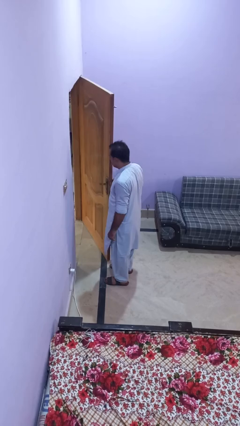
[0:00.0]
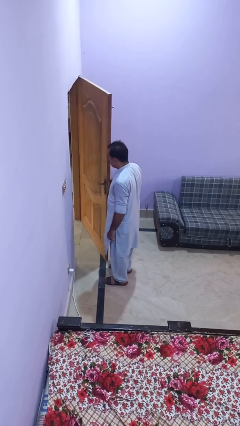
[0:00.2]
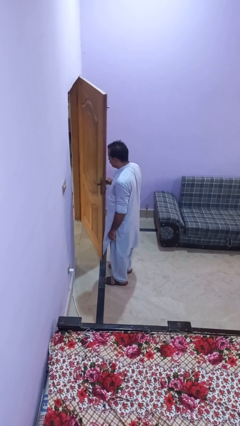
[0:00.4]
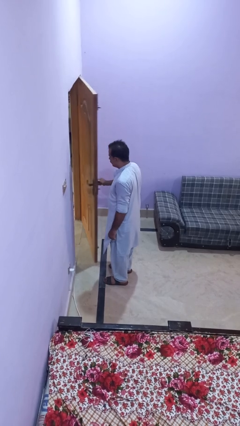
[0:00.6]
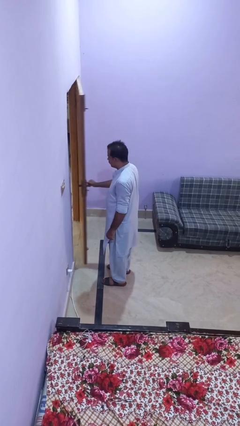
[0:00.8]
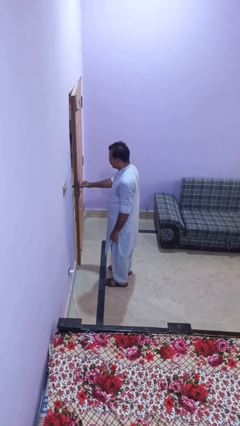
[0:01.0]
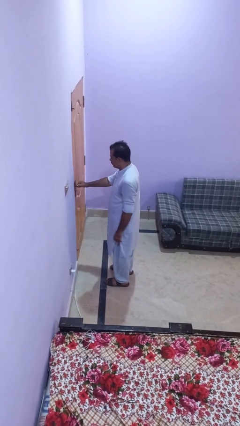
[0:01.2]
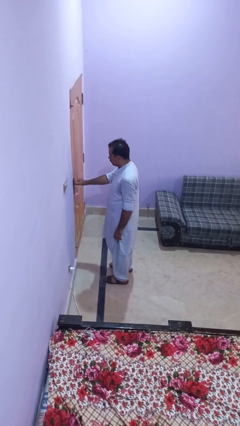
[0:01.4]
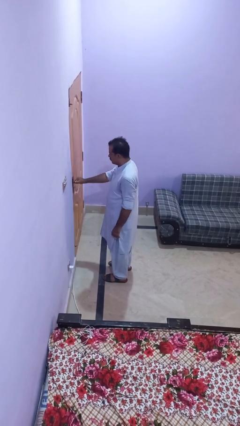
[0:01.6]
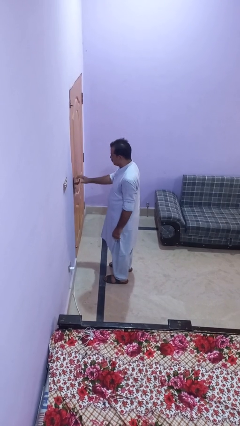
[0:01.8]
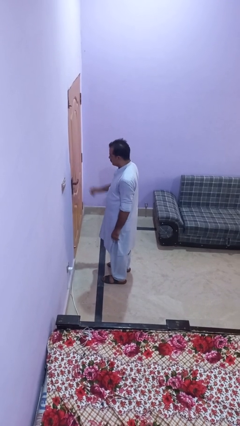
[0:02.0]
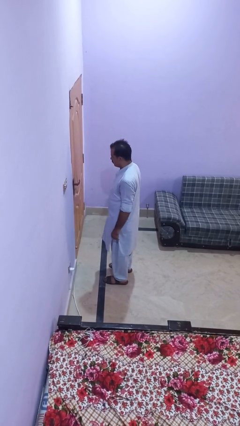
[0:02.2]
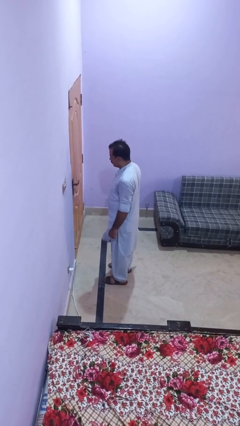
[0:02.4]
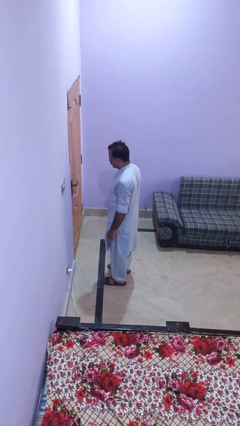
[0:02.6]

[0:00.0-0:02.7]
person closes facility door

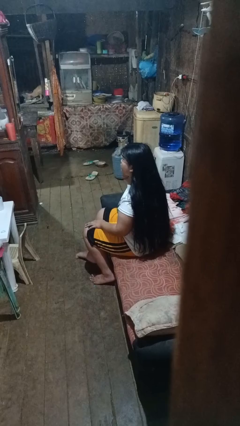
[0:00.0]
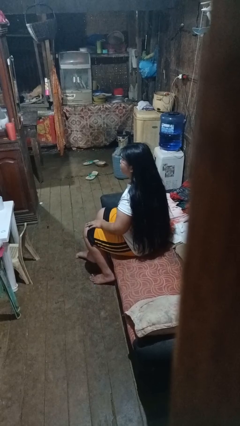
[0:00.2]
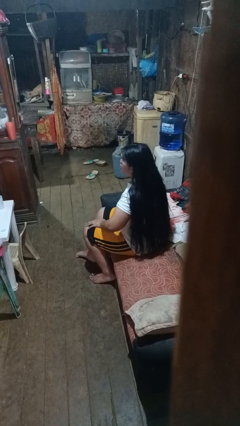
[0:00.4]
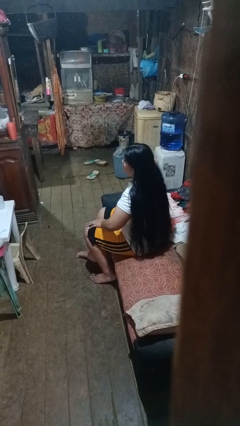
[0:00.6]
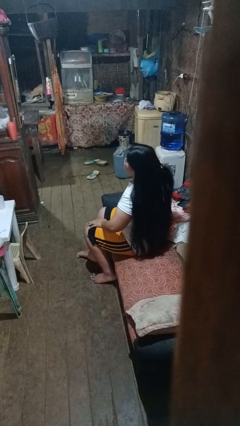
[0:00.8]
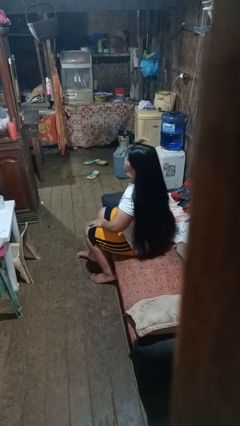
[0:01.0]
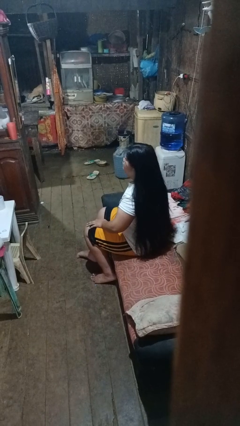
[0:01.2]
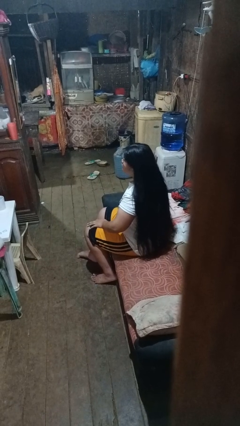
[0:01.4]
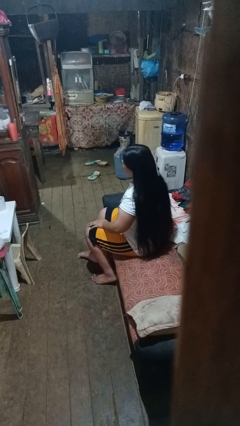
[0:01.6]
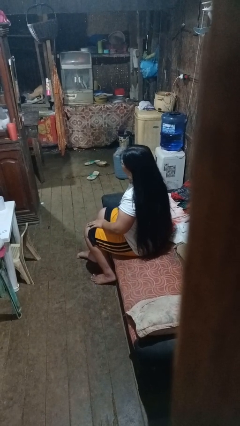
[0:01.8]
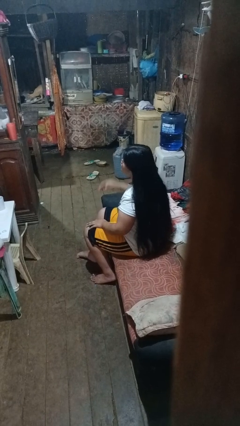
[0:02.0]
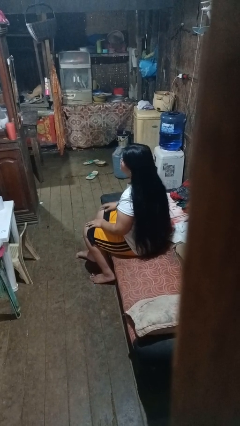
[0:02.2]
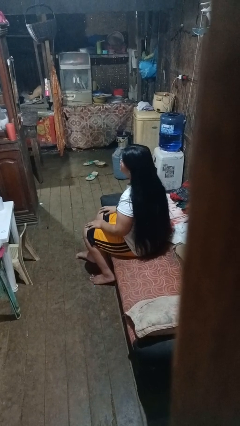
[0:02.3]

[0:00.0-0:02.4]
person strokes hair

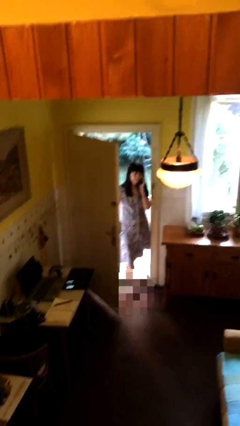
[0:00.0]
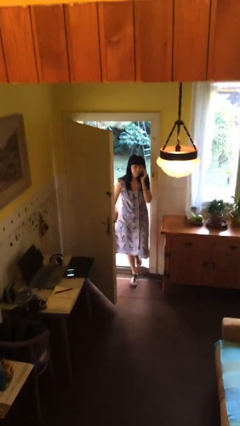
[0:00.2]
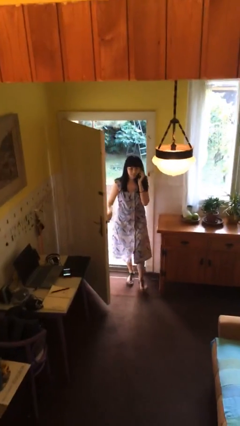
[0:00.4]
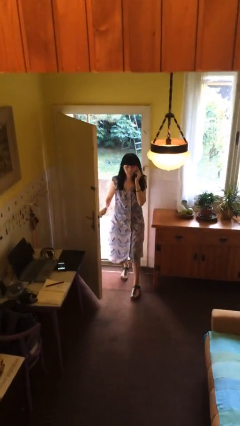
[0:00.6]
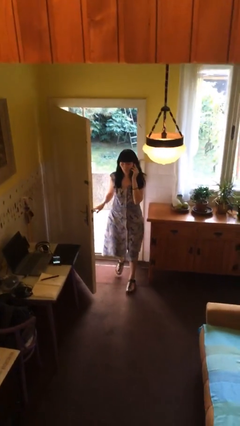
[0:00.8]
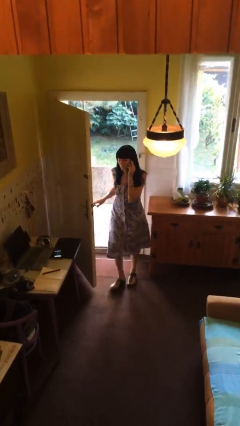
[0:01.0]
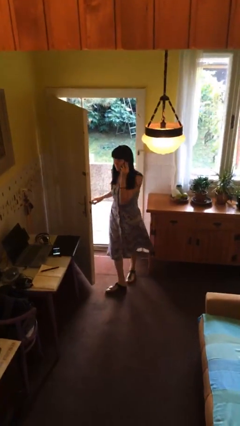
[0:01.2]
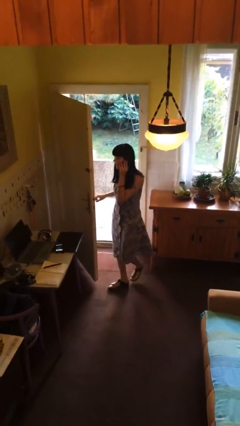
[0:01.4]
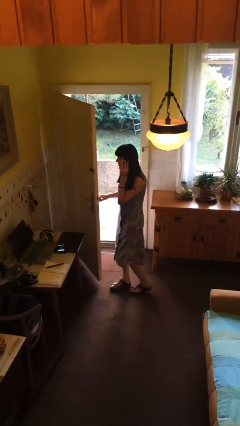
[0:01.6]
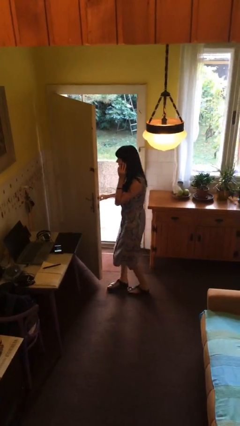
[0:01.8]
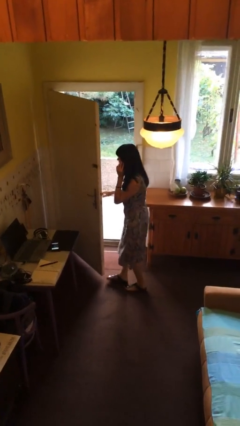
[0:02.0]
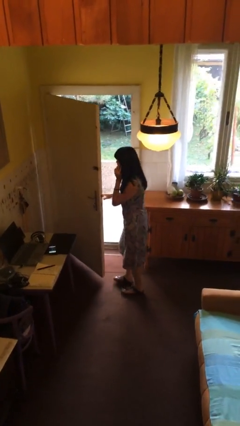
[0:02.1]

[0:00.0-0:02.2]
person enters scene through structure

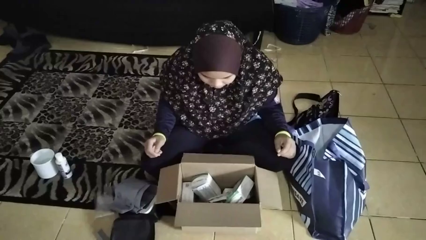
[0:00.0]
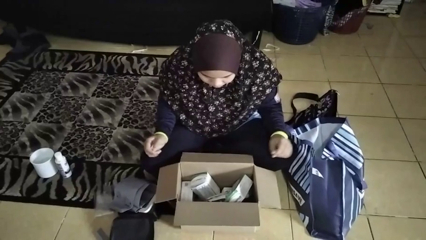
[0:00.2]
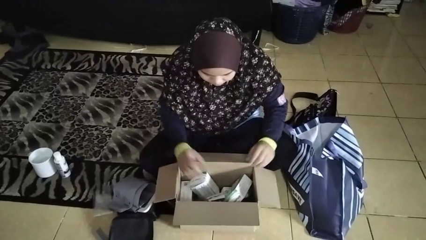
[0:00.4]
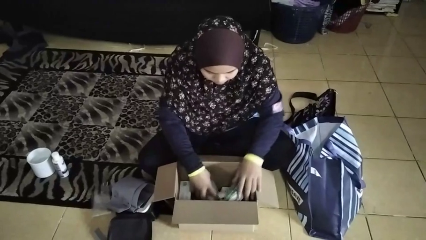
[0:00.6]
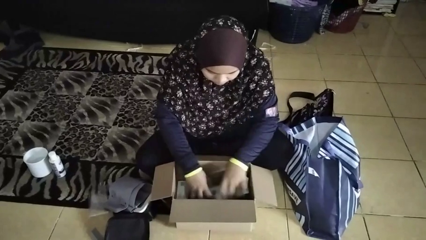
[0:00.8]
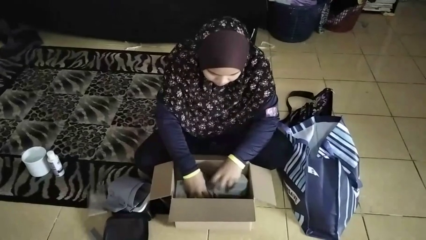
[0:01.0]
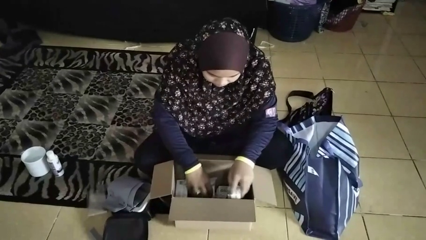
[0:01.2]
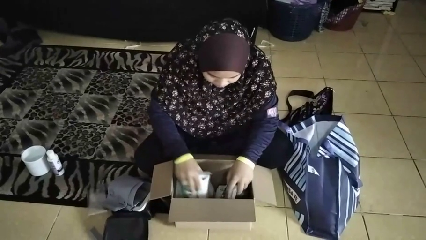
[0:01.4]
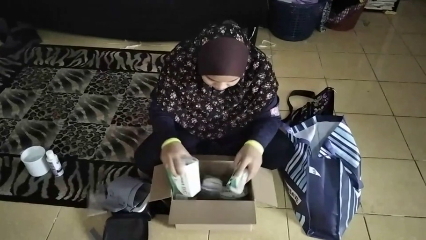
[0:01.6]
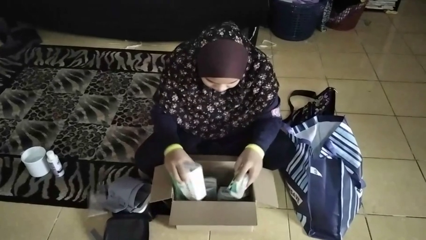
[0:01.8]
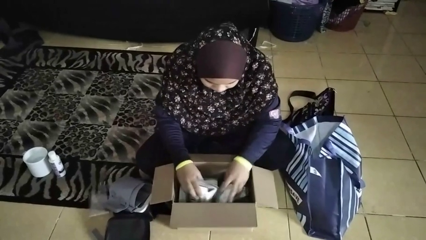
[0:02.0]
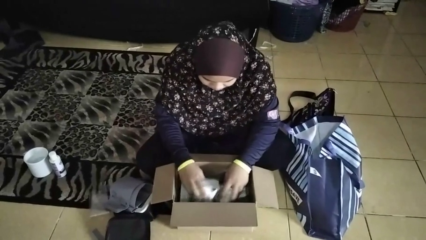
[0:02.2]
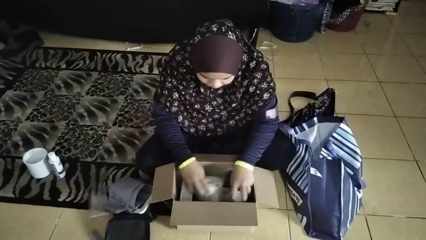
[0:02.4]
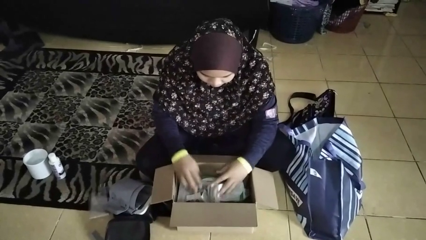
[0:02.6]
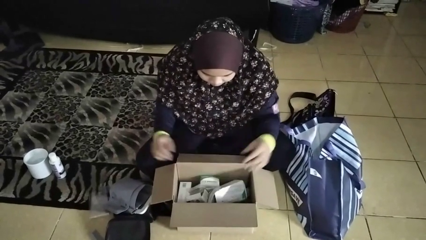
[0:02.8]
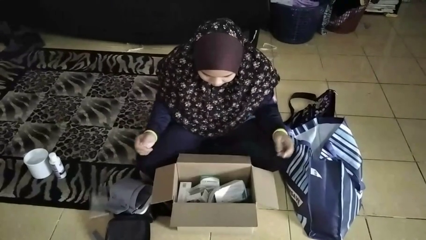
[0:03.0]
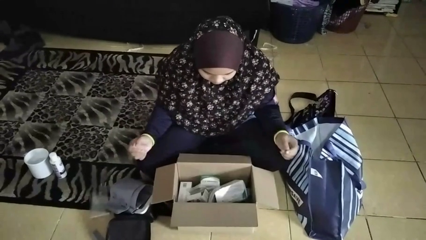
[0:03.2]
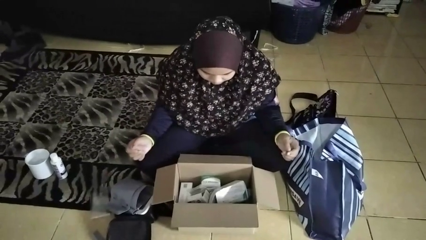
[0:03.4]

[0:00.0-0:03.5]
person searches in box

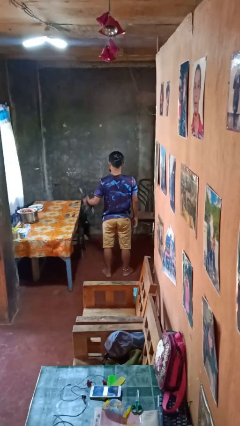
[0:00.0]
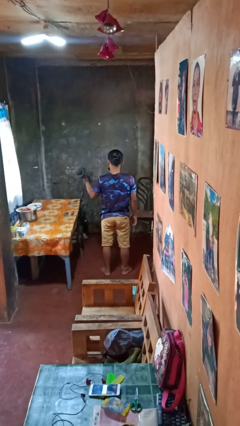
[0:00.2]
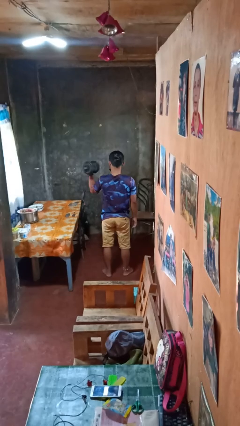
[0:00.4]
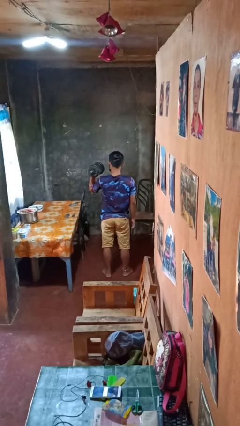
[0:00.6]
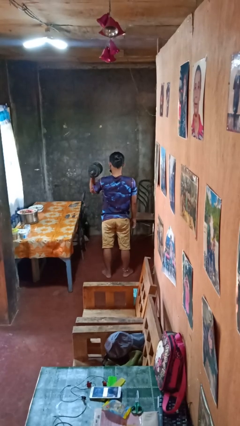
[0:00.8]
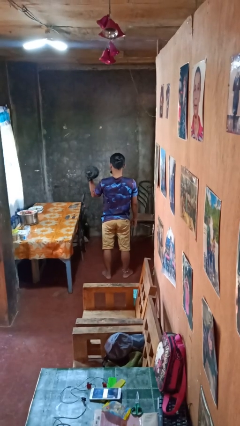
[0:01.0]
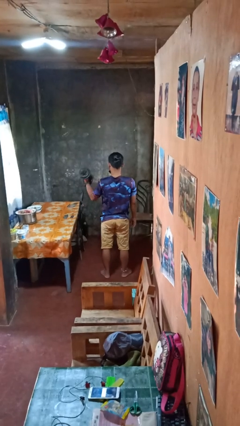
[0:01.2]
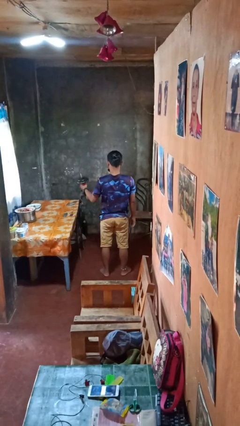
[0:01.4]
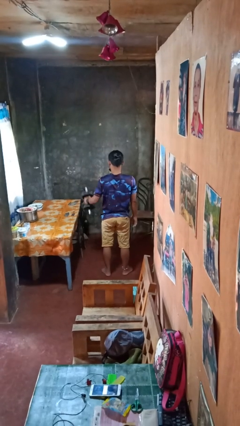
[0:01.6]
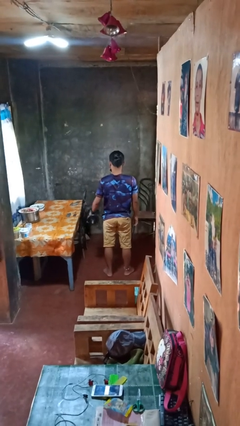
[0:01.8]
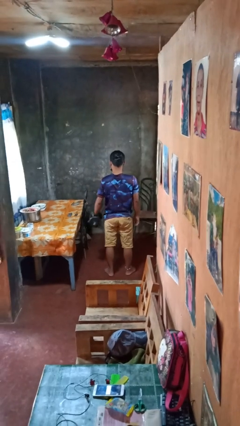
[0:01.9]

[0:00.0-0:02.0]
person lifts dumbbells

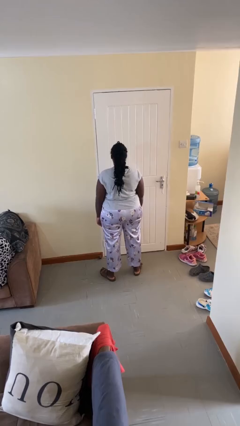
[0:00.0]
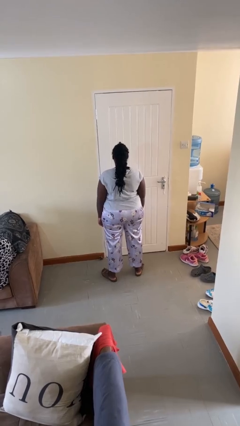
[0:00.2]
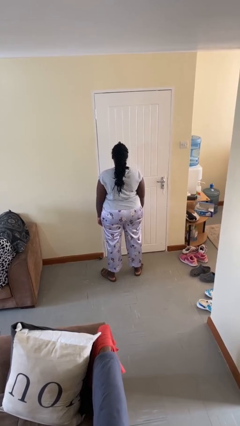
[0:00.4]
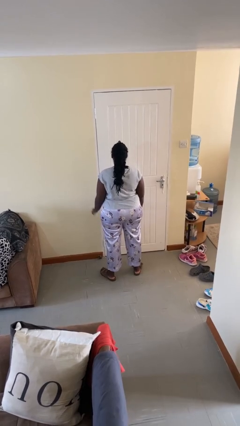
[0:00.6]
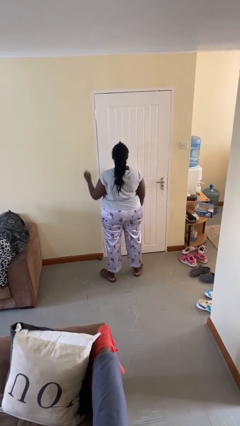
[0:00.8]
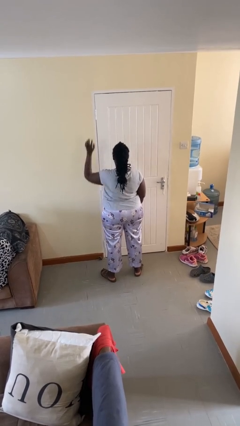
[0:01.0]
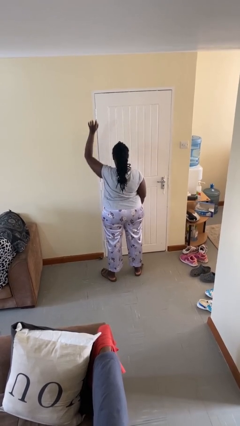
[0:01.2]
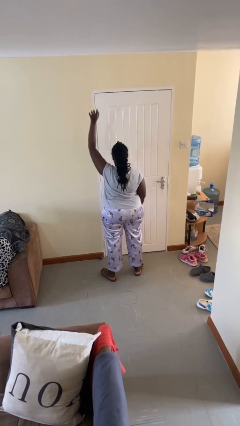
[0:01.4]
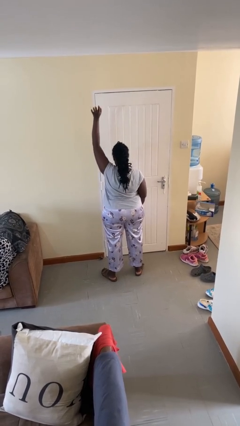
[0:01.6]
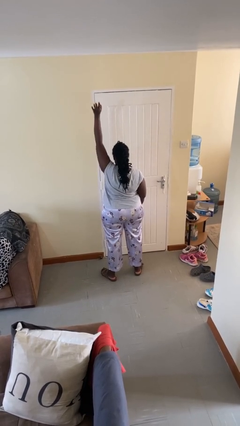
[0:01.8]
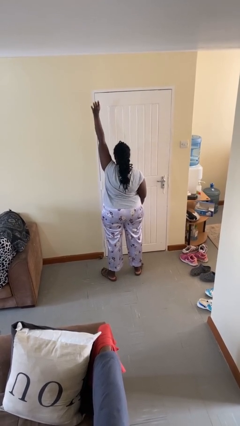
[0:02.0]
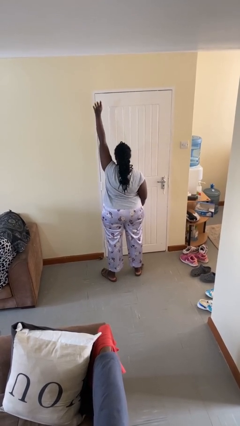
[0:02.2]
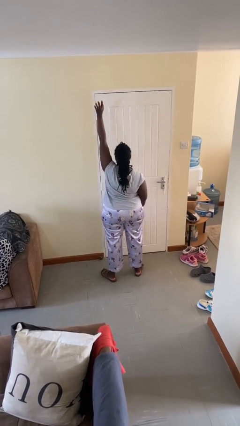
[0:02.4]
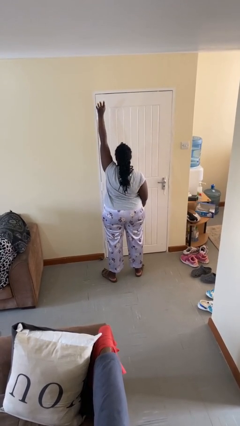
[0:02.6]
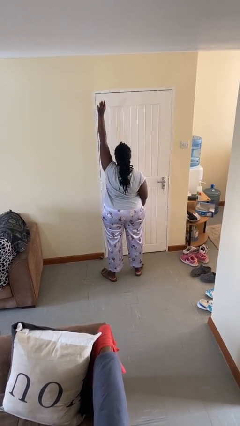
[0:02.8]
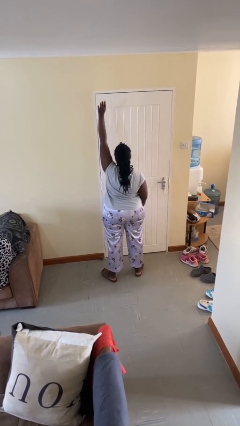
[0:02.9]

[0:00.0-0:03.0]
person gestures raise hand

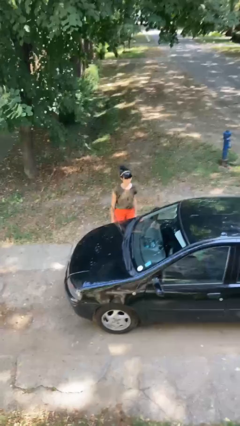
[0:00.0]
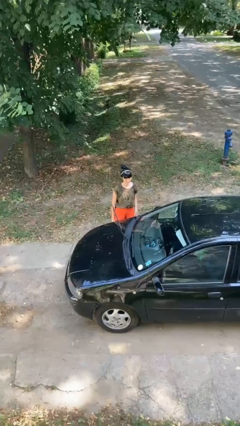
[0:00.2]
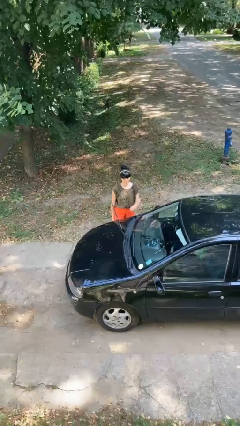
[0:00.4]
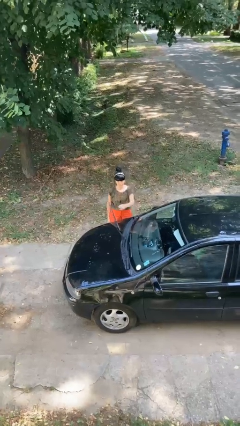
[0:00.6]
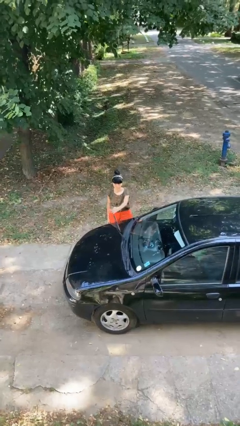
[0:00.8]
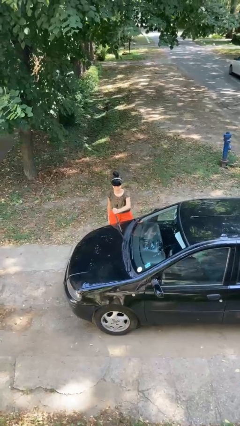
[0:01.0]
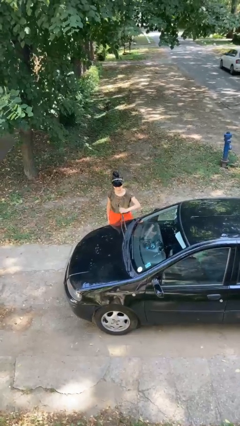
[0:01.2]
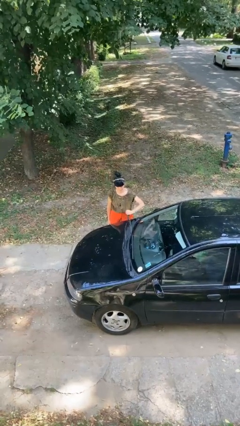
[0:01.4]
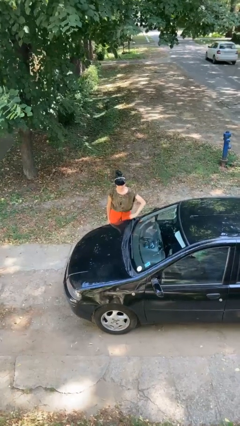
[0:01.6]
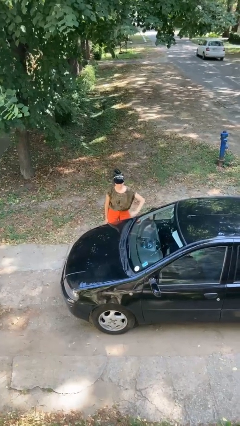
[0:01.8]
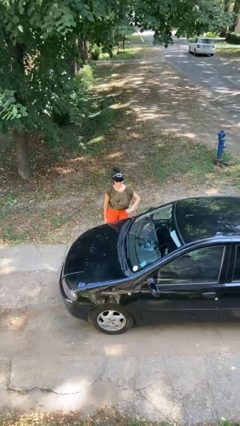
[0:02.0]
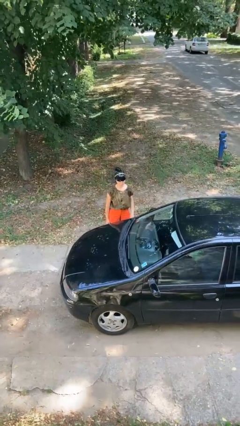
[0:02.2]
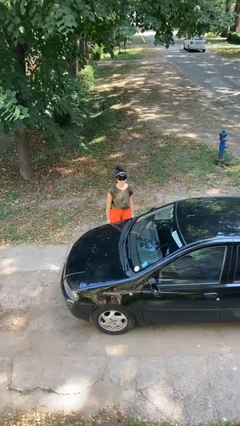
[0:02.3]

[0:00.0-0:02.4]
person flips down car wipers
